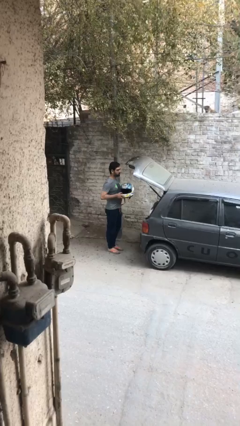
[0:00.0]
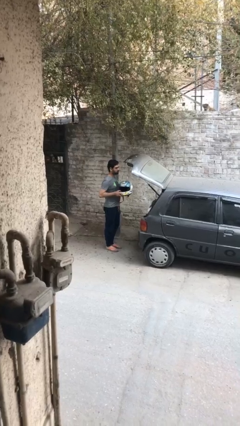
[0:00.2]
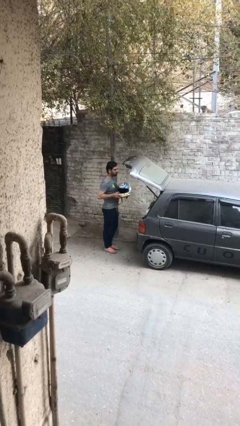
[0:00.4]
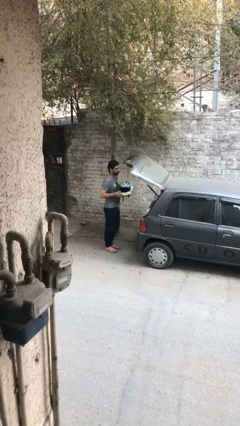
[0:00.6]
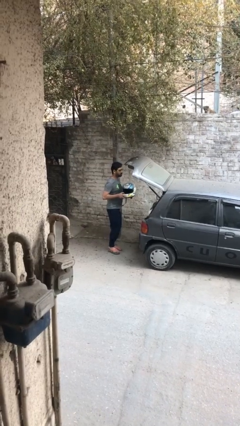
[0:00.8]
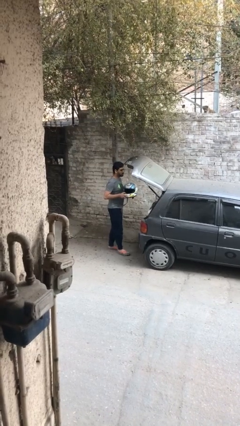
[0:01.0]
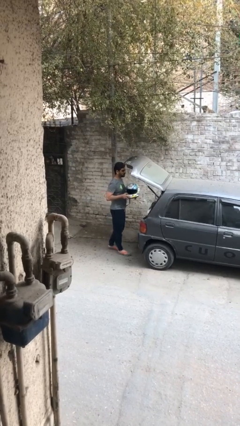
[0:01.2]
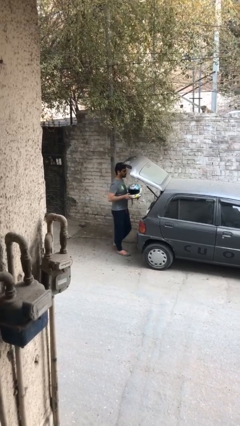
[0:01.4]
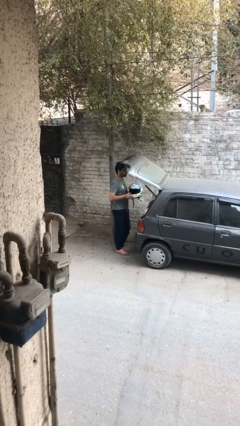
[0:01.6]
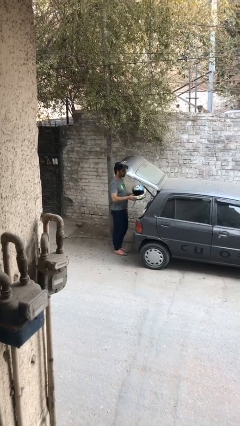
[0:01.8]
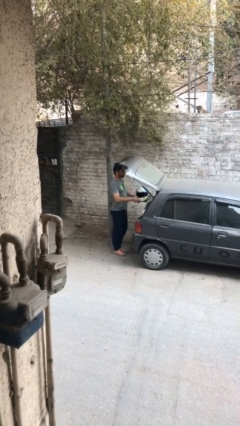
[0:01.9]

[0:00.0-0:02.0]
person loads car

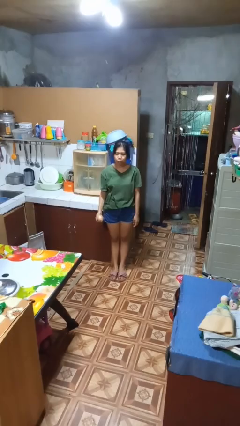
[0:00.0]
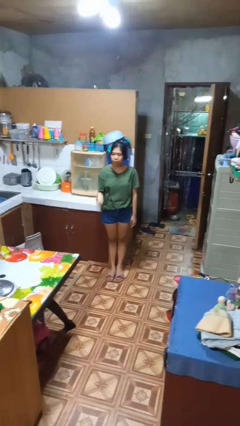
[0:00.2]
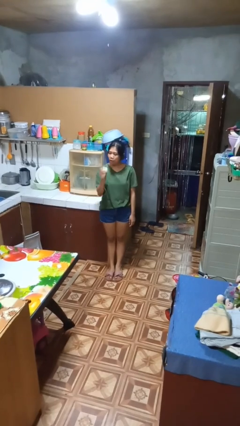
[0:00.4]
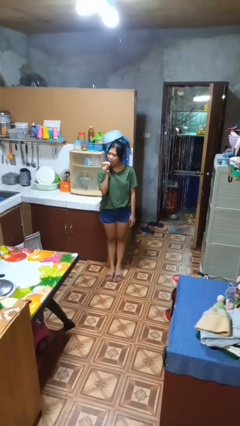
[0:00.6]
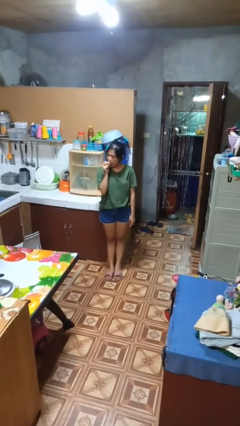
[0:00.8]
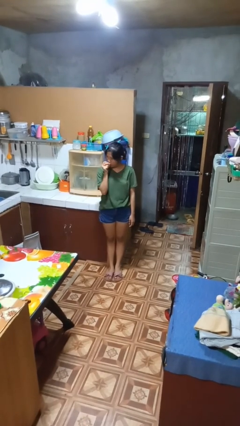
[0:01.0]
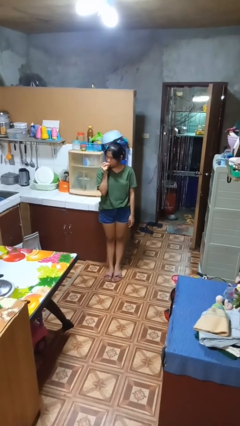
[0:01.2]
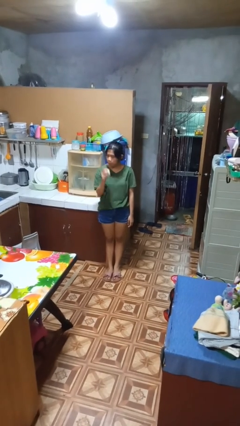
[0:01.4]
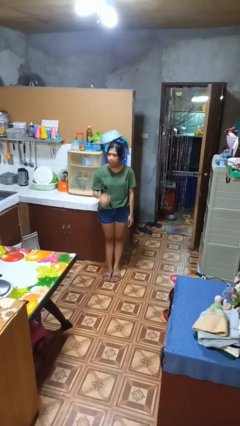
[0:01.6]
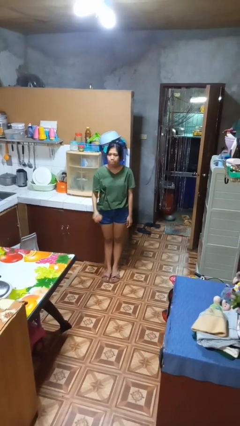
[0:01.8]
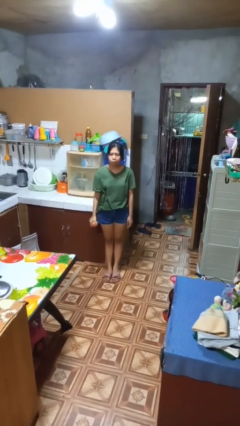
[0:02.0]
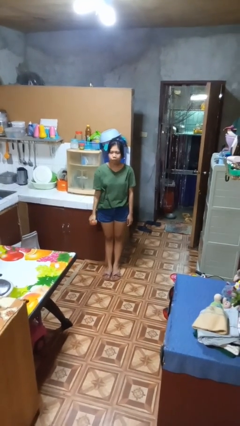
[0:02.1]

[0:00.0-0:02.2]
person eats apple

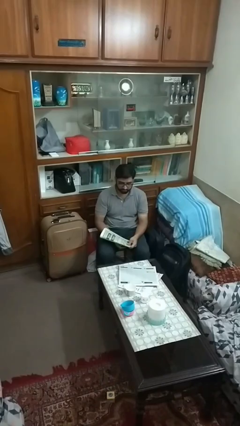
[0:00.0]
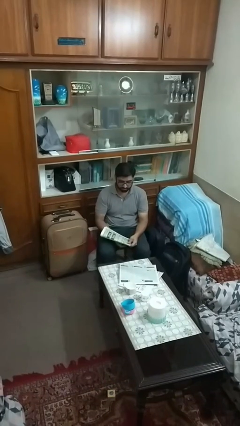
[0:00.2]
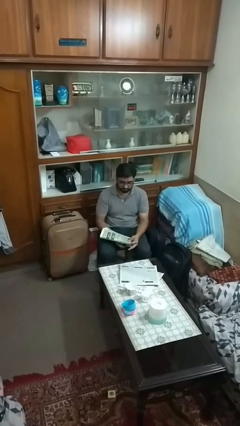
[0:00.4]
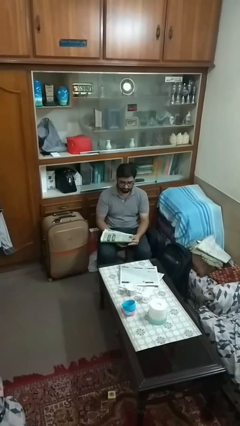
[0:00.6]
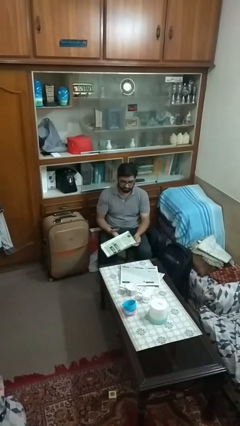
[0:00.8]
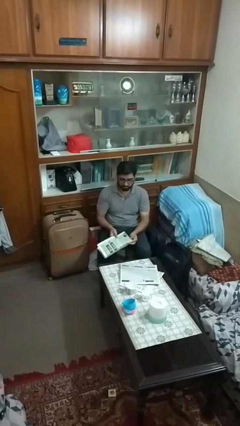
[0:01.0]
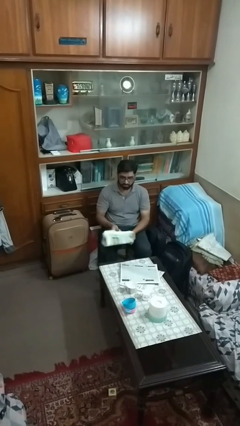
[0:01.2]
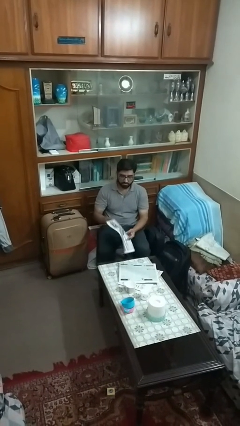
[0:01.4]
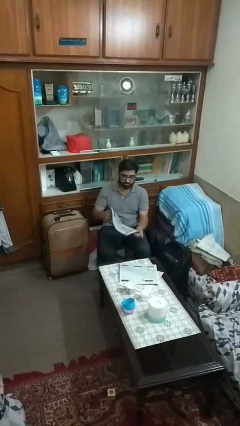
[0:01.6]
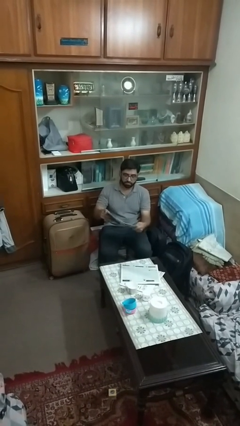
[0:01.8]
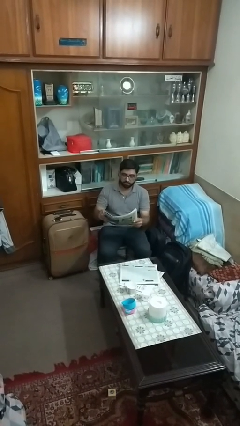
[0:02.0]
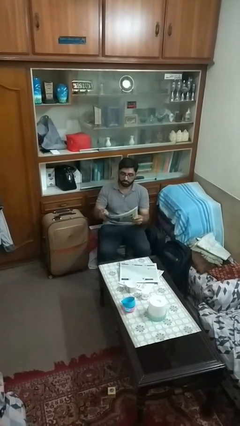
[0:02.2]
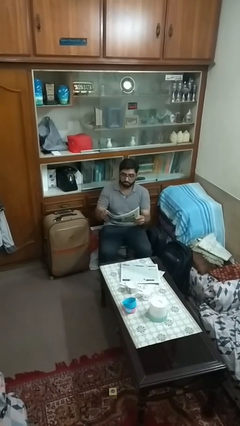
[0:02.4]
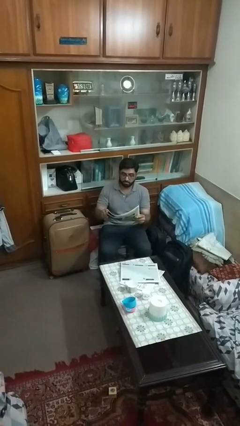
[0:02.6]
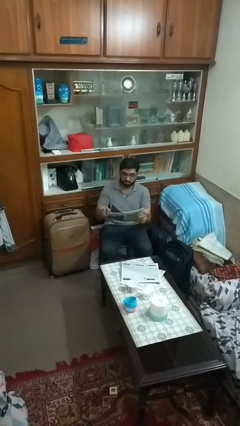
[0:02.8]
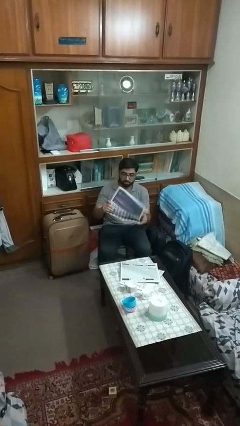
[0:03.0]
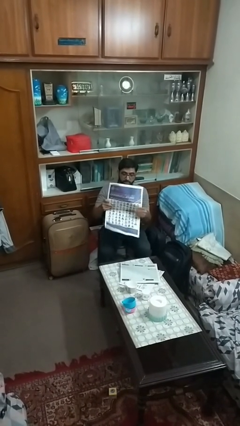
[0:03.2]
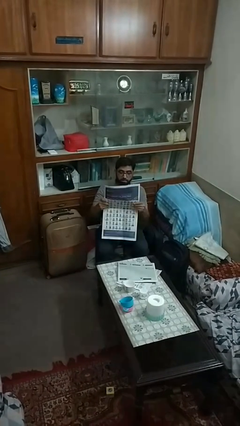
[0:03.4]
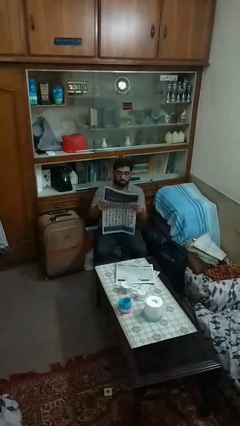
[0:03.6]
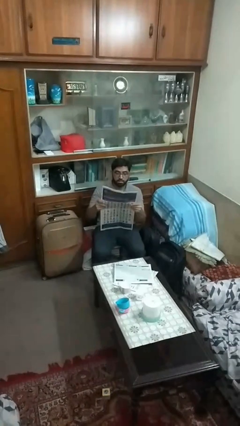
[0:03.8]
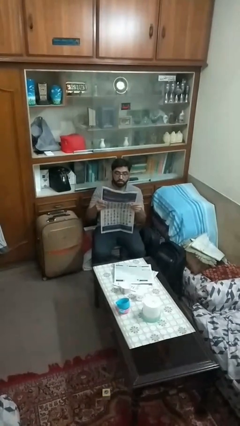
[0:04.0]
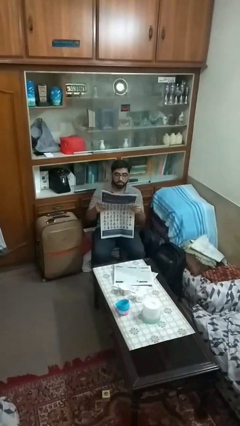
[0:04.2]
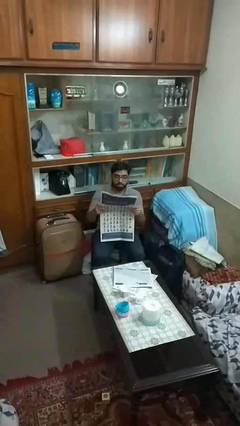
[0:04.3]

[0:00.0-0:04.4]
person reads newspaper

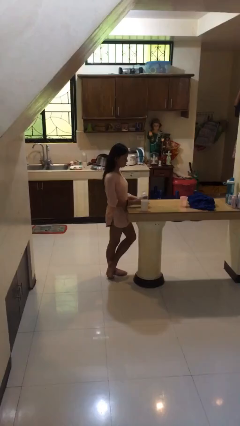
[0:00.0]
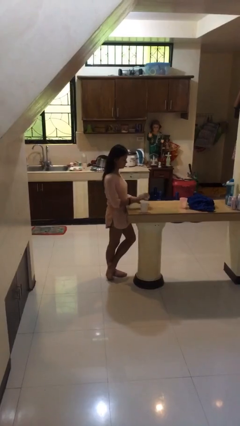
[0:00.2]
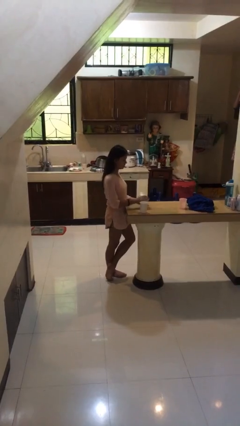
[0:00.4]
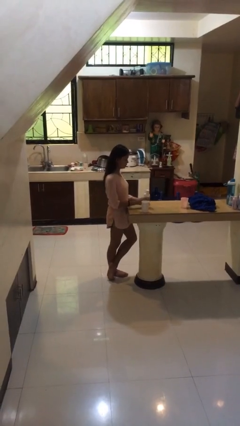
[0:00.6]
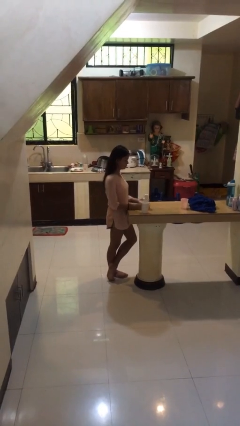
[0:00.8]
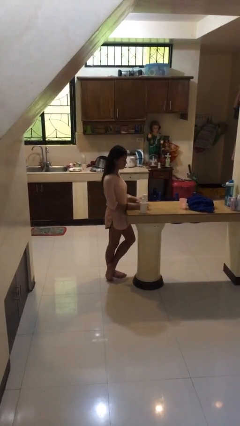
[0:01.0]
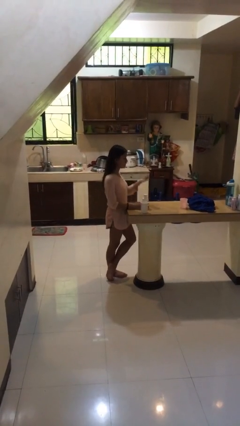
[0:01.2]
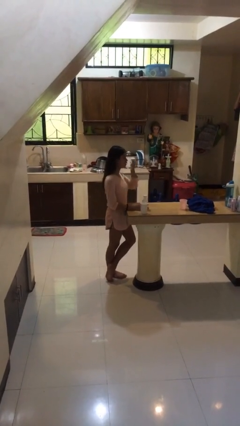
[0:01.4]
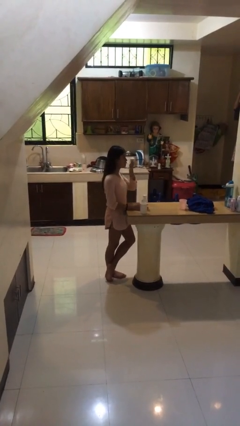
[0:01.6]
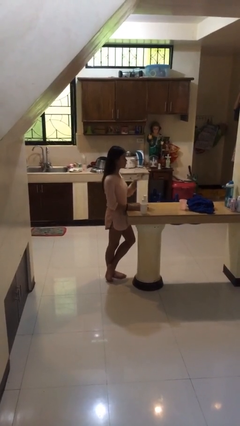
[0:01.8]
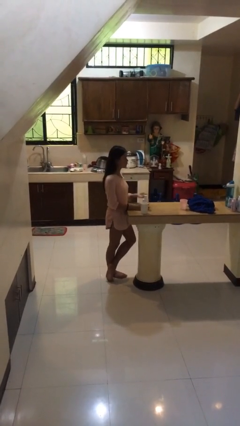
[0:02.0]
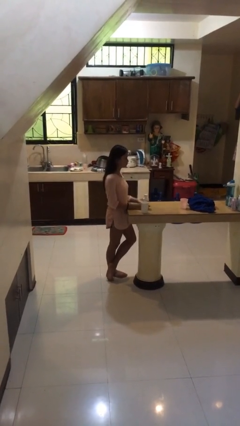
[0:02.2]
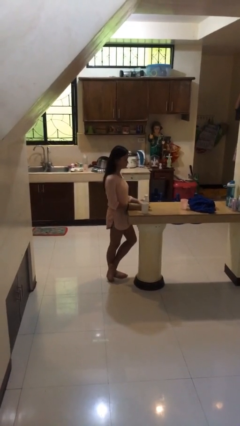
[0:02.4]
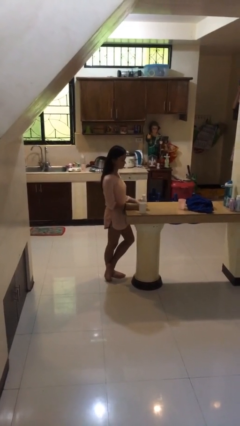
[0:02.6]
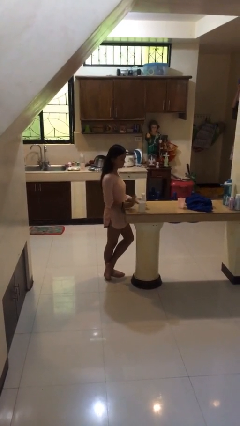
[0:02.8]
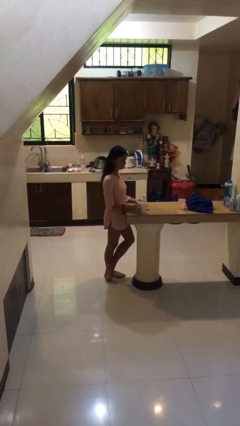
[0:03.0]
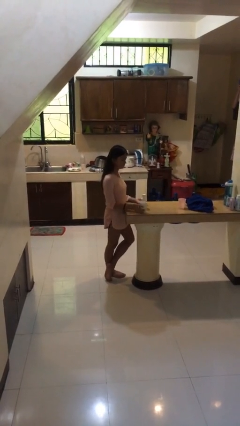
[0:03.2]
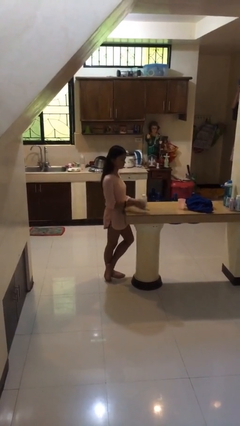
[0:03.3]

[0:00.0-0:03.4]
person takes medicine pills

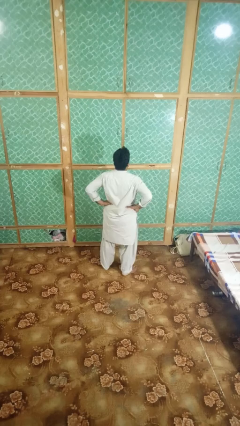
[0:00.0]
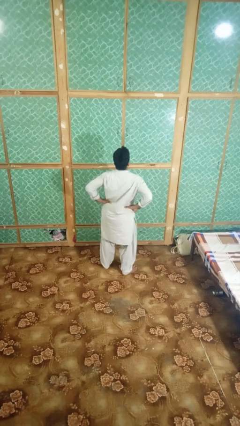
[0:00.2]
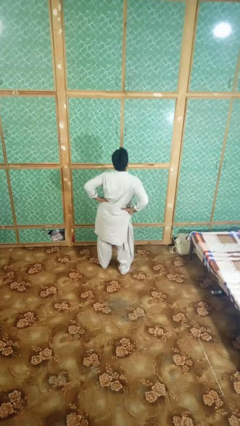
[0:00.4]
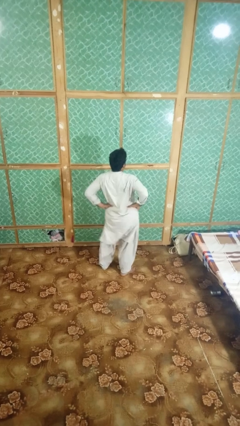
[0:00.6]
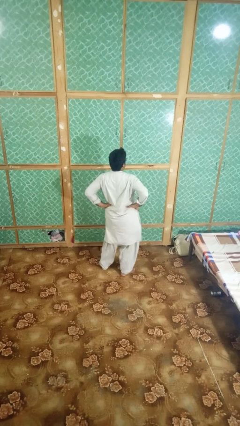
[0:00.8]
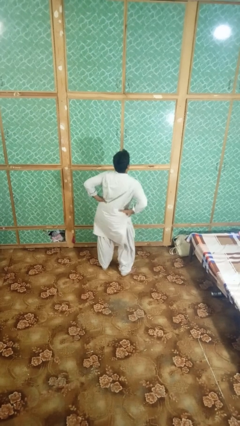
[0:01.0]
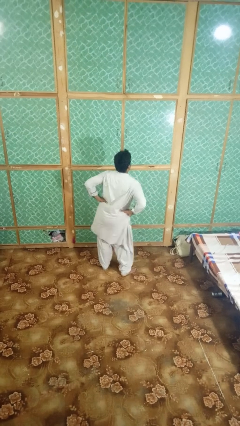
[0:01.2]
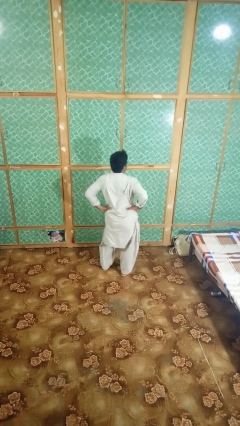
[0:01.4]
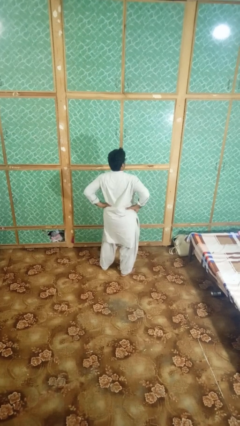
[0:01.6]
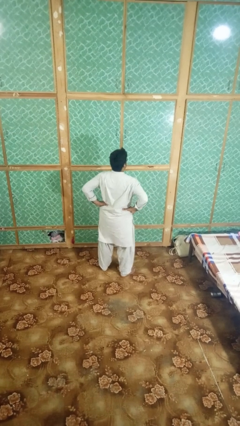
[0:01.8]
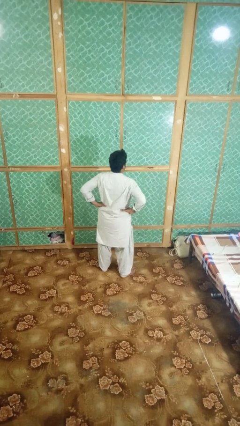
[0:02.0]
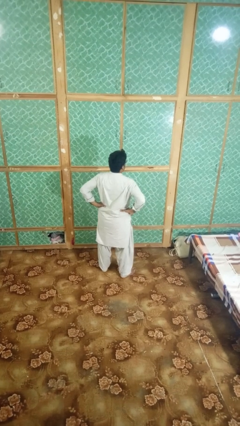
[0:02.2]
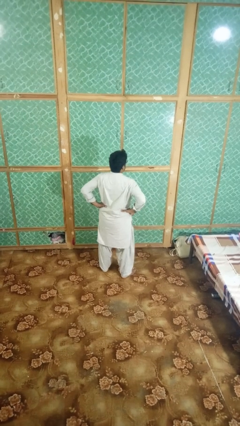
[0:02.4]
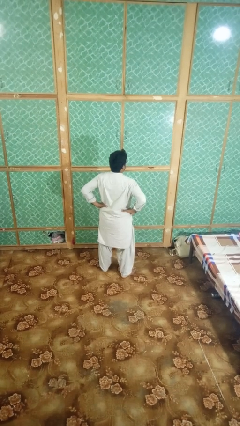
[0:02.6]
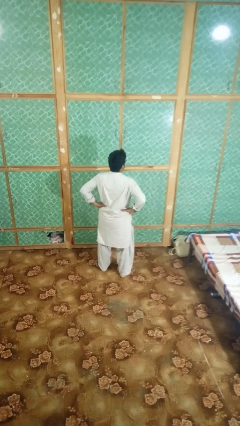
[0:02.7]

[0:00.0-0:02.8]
person wiggles hips

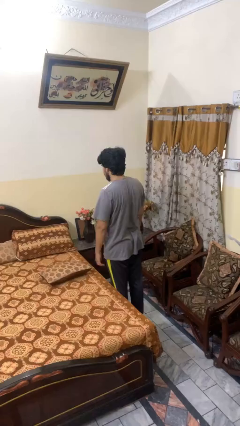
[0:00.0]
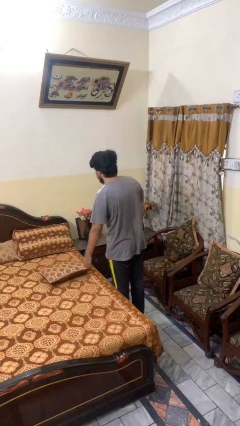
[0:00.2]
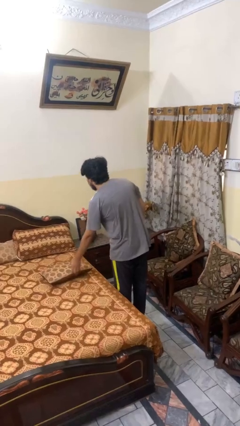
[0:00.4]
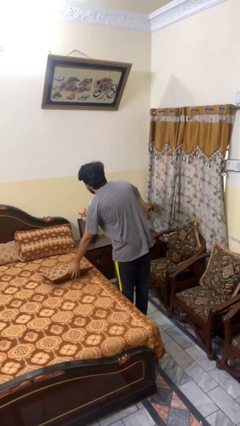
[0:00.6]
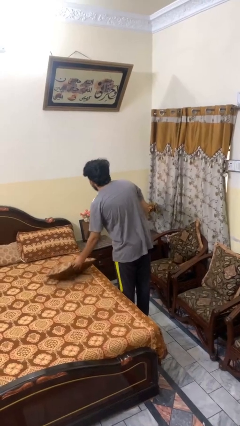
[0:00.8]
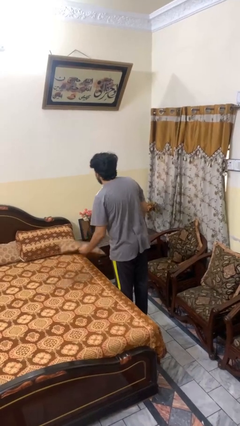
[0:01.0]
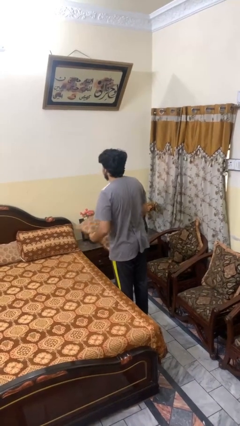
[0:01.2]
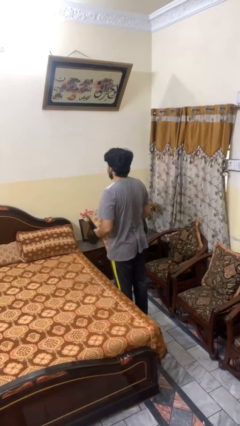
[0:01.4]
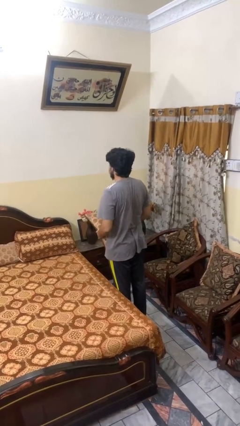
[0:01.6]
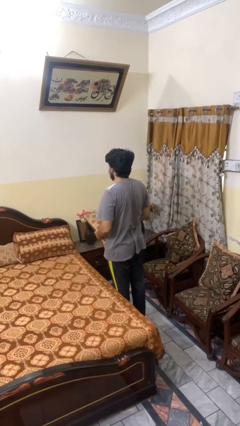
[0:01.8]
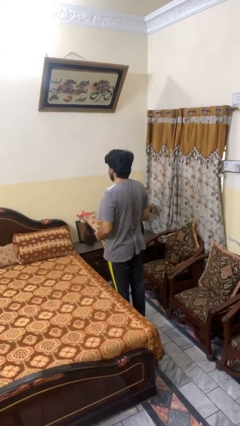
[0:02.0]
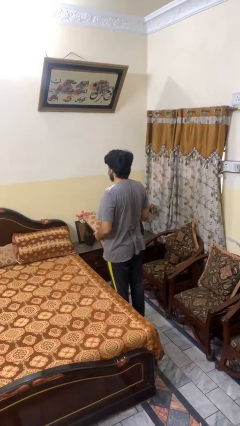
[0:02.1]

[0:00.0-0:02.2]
person picks up object from bed
